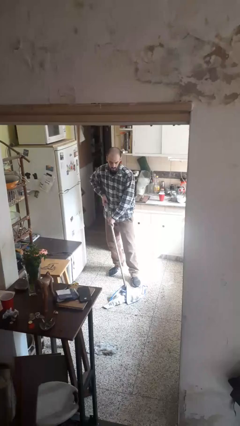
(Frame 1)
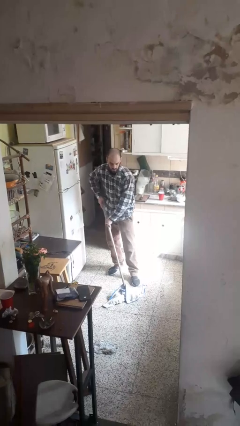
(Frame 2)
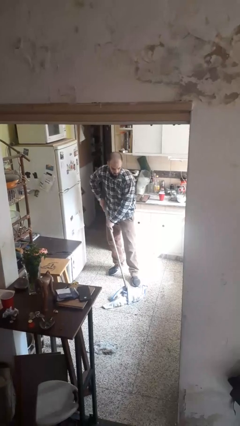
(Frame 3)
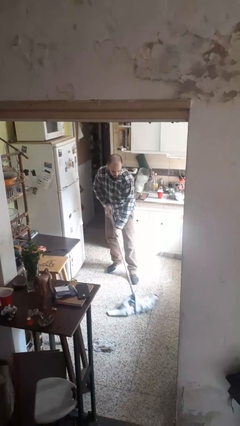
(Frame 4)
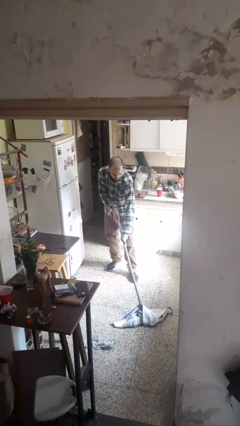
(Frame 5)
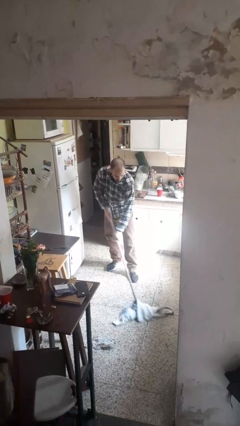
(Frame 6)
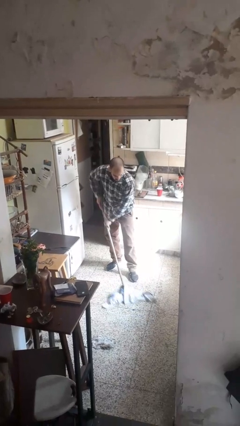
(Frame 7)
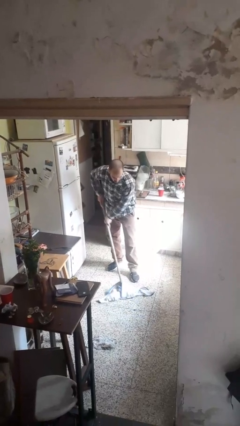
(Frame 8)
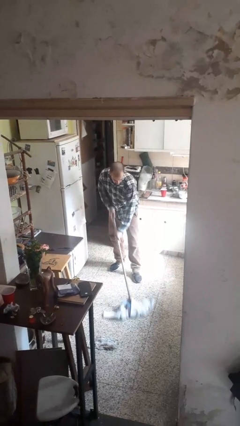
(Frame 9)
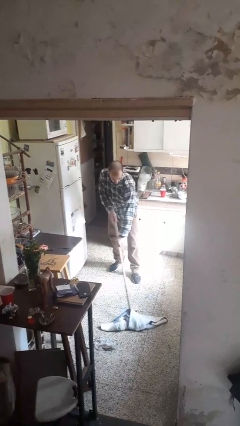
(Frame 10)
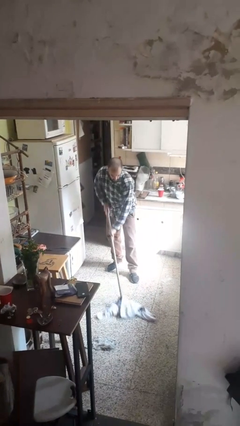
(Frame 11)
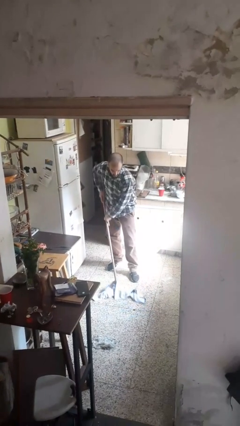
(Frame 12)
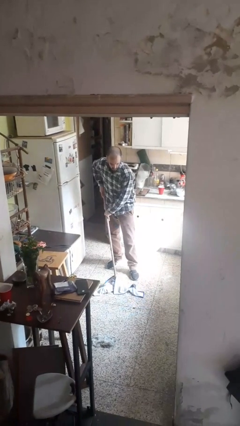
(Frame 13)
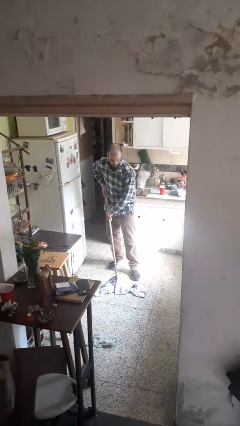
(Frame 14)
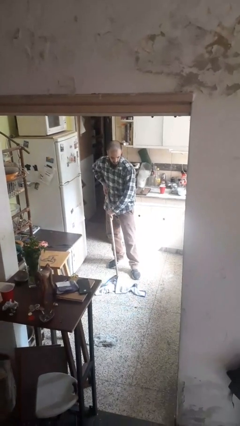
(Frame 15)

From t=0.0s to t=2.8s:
person mops

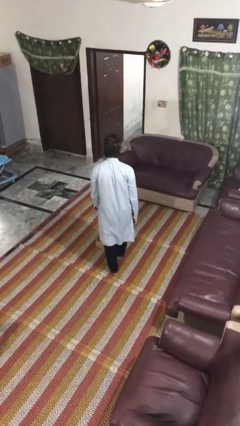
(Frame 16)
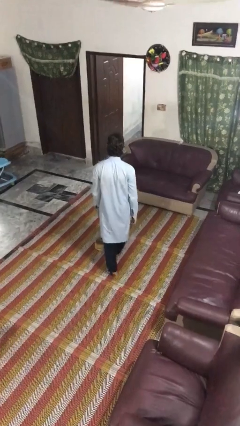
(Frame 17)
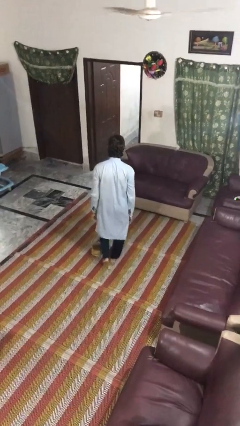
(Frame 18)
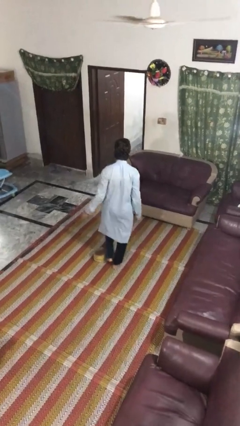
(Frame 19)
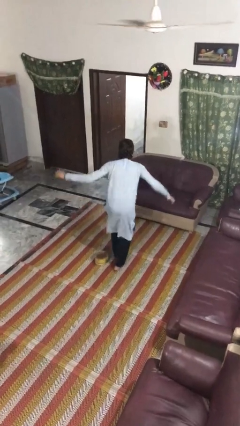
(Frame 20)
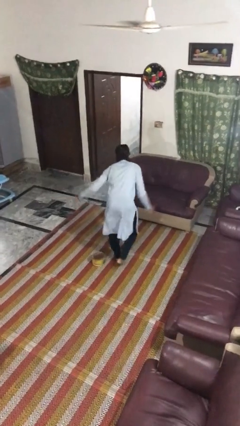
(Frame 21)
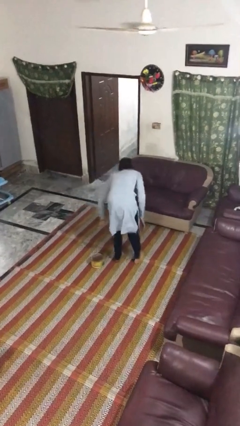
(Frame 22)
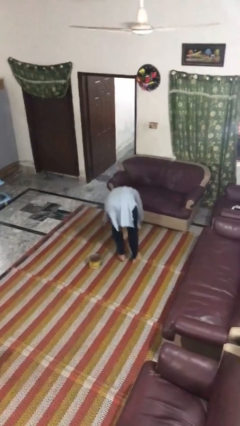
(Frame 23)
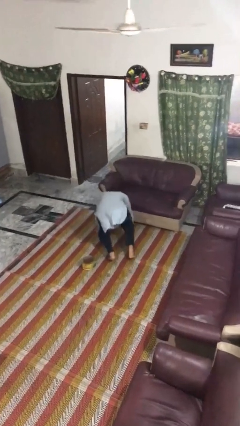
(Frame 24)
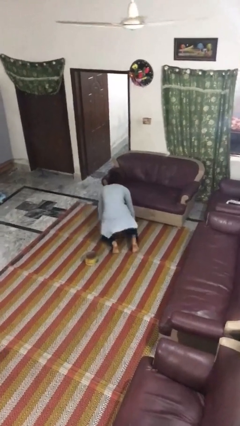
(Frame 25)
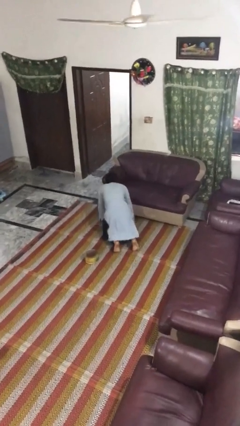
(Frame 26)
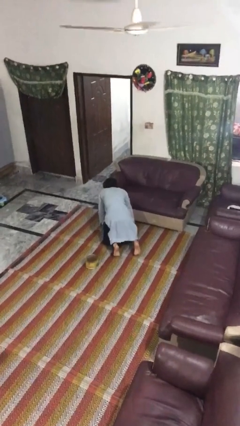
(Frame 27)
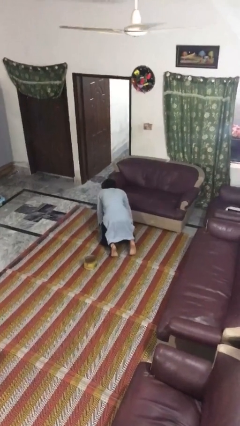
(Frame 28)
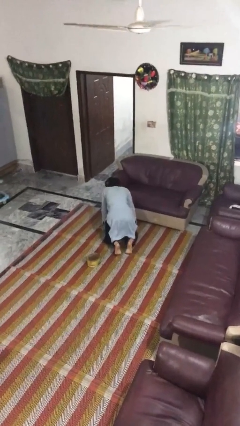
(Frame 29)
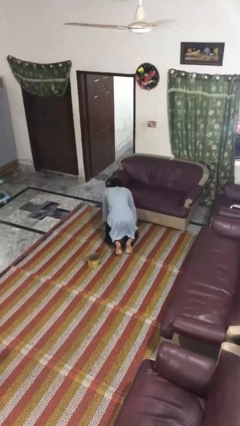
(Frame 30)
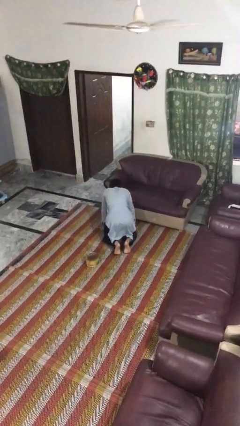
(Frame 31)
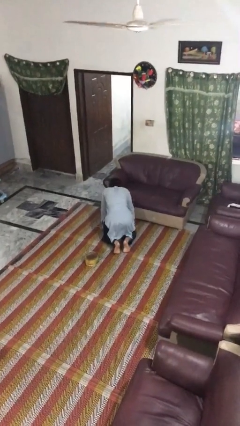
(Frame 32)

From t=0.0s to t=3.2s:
person trips on object on floor

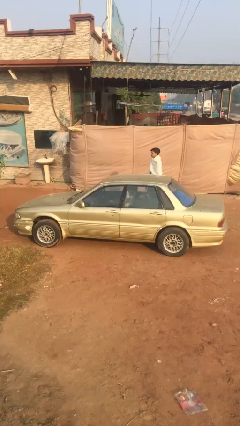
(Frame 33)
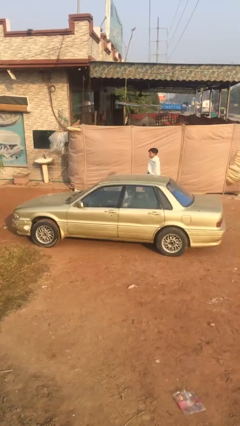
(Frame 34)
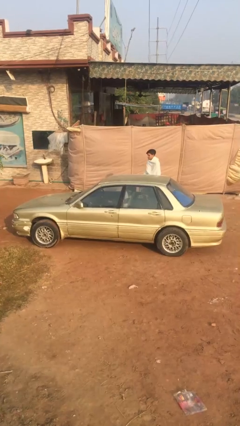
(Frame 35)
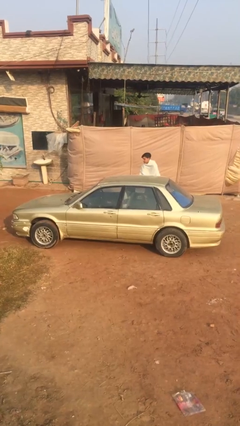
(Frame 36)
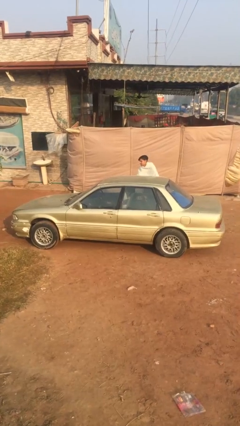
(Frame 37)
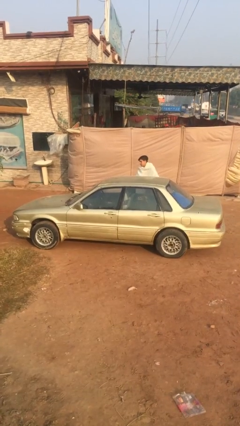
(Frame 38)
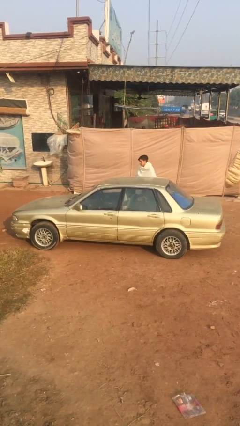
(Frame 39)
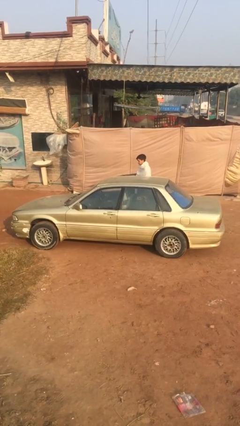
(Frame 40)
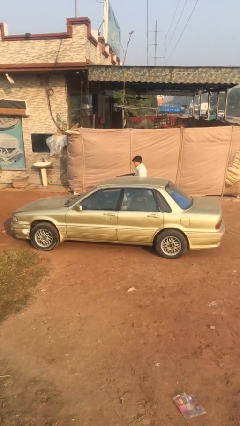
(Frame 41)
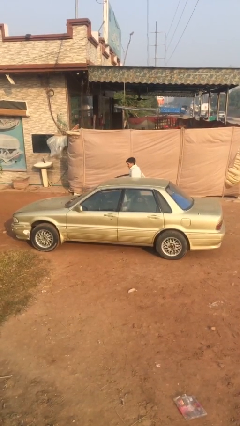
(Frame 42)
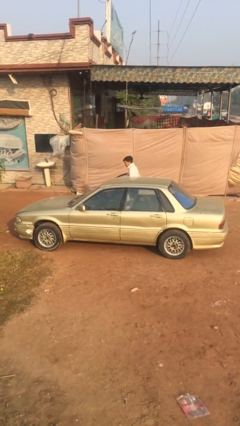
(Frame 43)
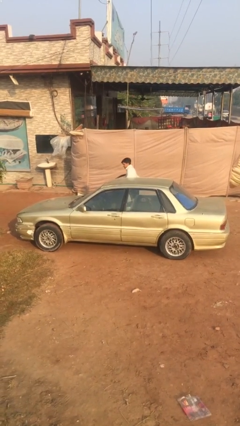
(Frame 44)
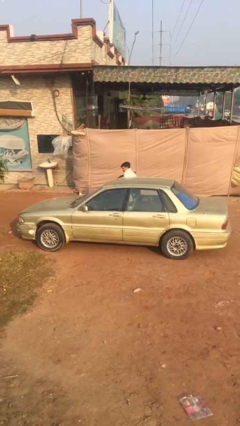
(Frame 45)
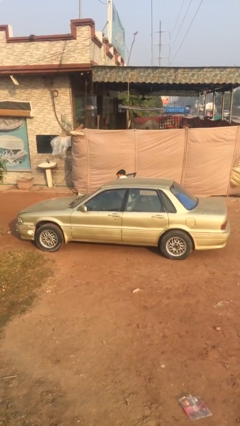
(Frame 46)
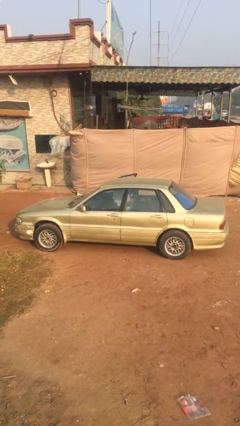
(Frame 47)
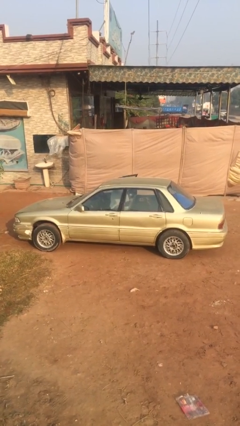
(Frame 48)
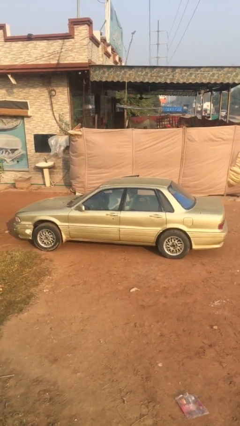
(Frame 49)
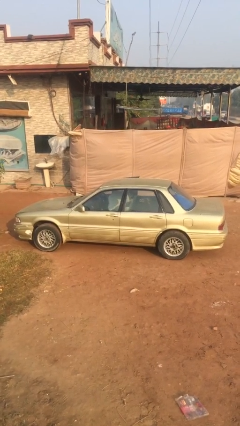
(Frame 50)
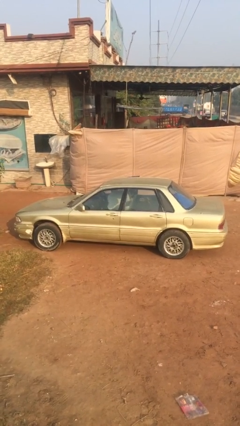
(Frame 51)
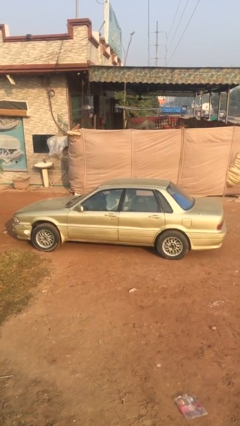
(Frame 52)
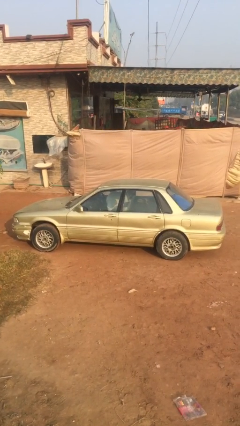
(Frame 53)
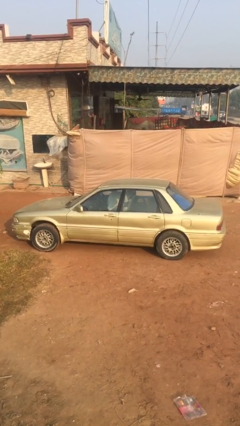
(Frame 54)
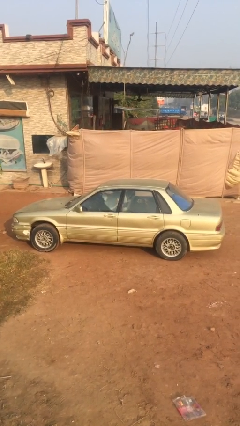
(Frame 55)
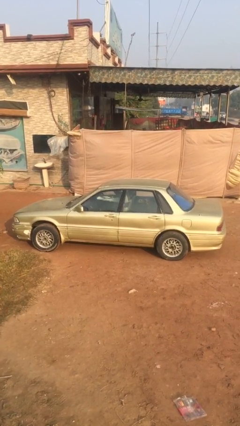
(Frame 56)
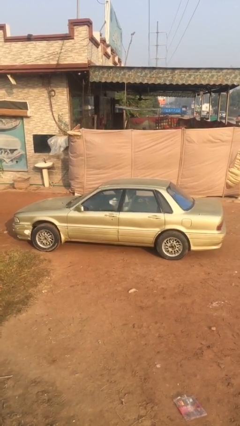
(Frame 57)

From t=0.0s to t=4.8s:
car picks up person

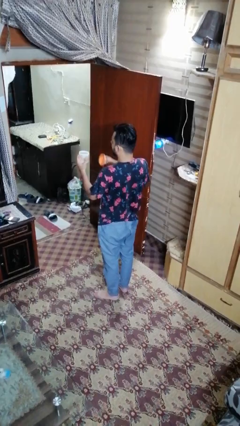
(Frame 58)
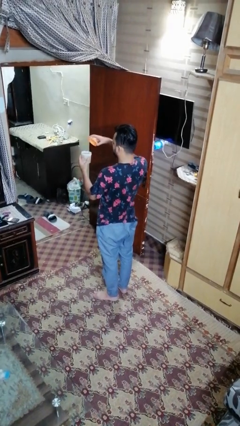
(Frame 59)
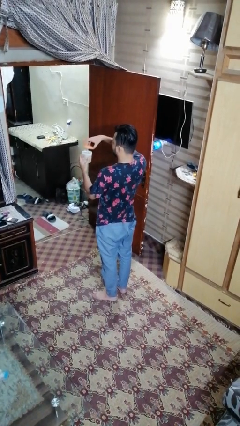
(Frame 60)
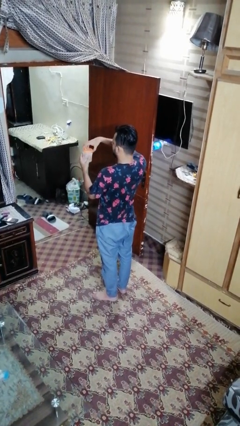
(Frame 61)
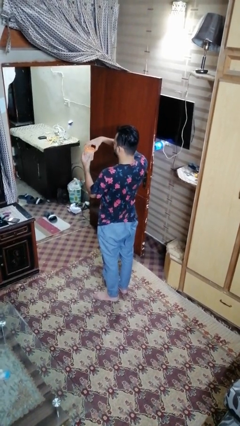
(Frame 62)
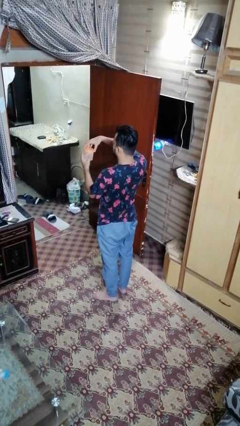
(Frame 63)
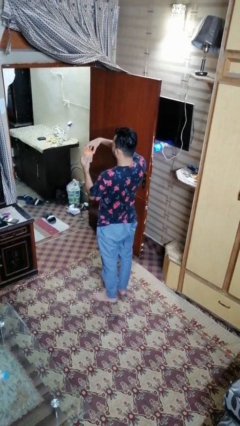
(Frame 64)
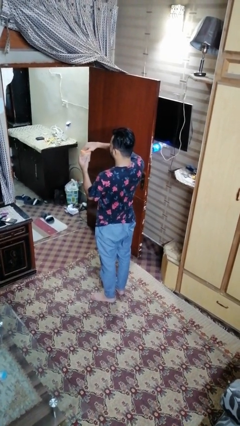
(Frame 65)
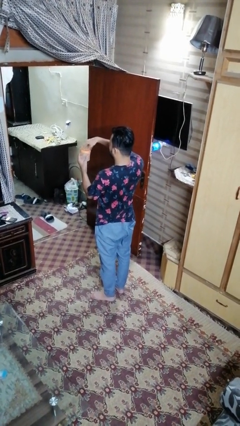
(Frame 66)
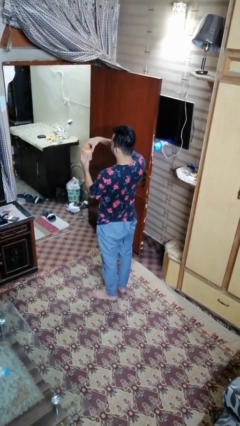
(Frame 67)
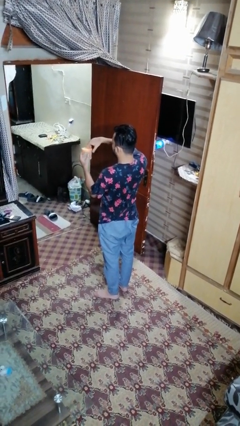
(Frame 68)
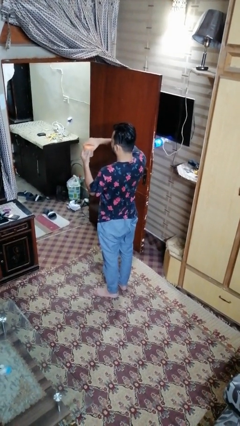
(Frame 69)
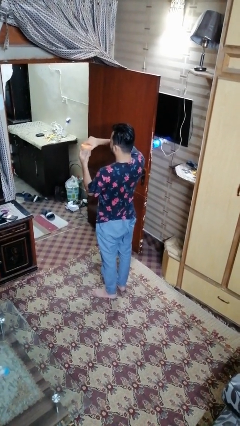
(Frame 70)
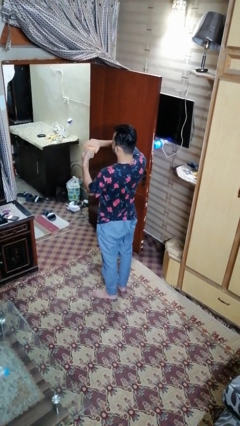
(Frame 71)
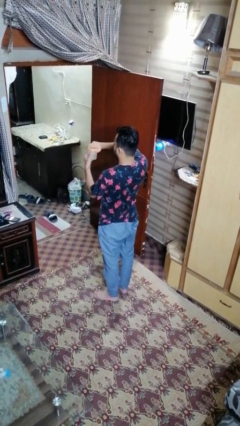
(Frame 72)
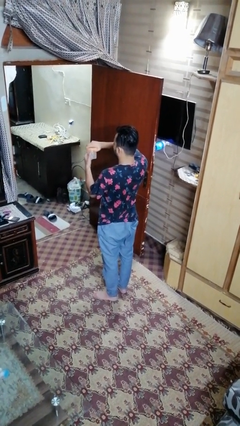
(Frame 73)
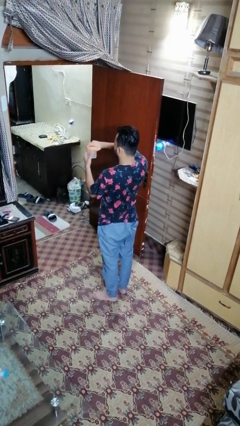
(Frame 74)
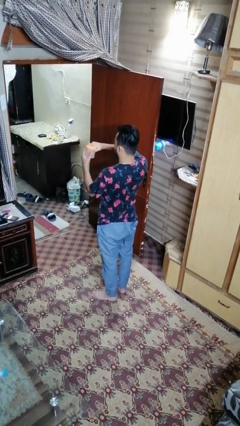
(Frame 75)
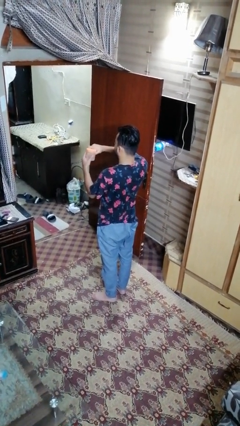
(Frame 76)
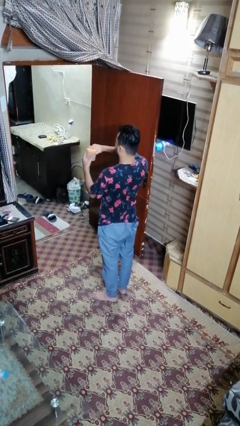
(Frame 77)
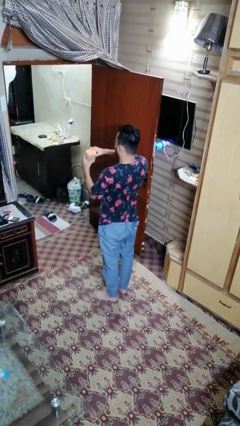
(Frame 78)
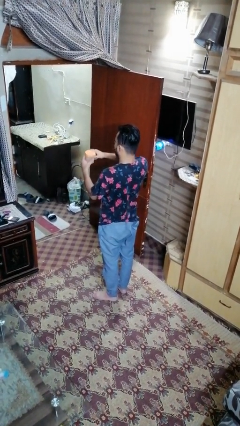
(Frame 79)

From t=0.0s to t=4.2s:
person closes jar

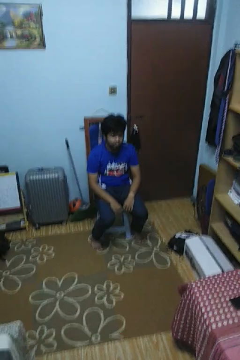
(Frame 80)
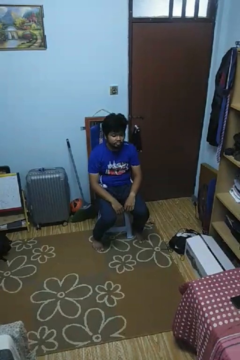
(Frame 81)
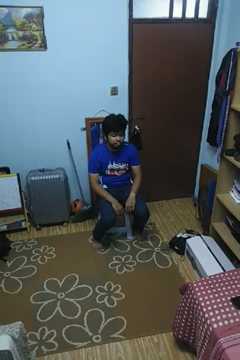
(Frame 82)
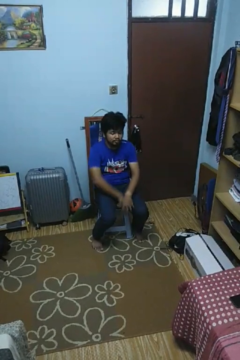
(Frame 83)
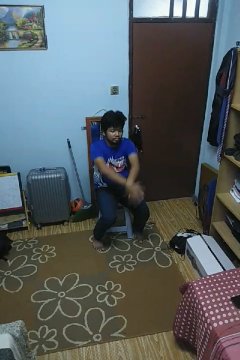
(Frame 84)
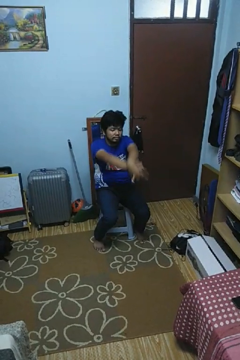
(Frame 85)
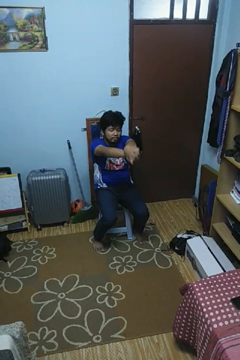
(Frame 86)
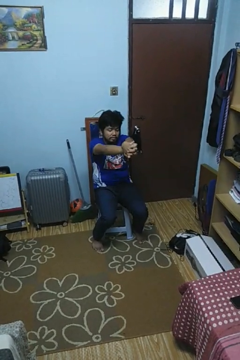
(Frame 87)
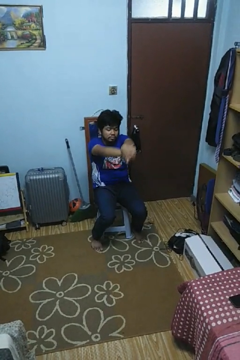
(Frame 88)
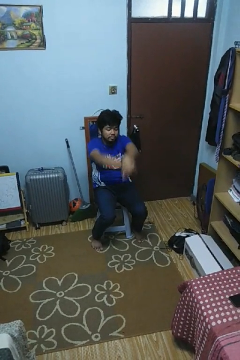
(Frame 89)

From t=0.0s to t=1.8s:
person crosses arms

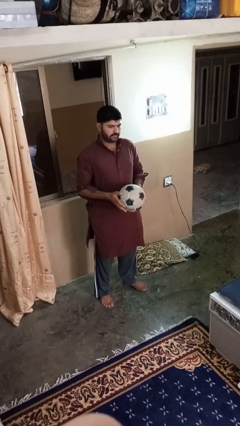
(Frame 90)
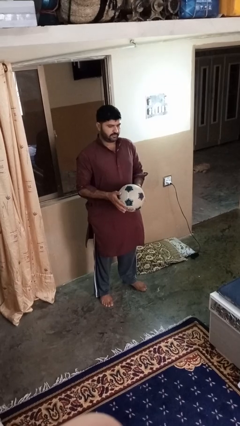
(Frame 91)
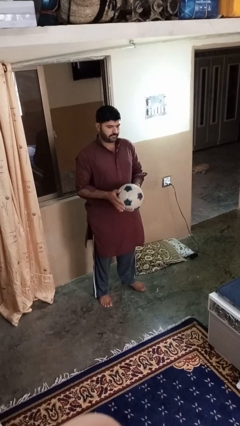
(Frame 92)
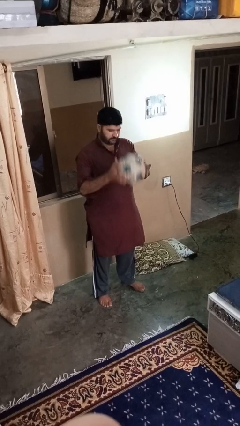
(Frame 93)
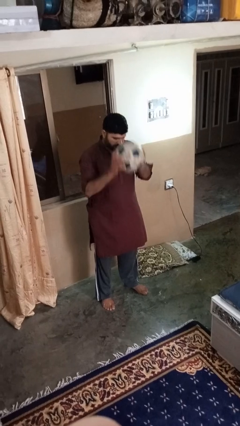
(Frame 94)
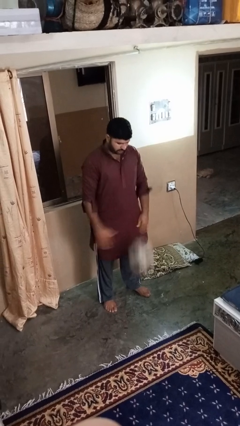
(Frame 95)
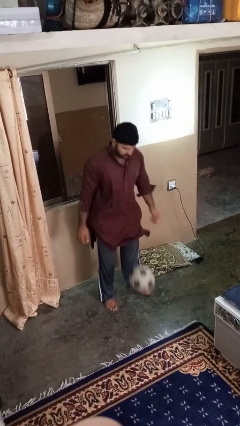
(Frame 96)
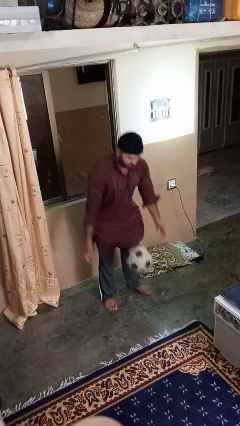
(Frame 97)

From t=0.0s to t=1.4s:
person bounces ball on floor
